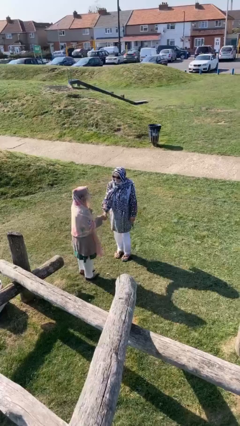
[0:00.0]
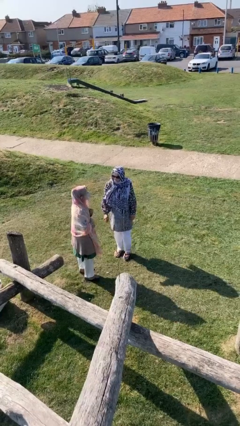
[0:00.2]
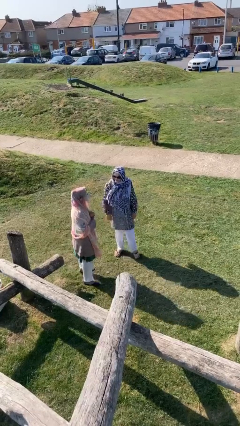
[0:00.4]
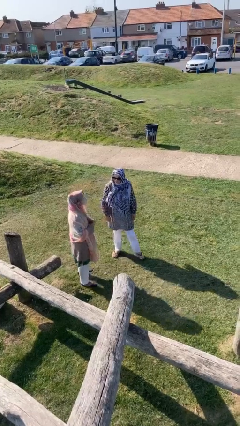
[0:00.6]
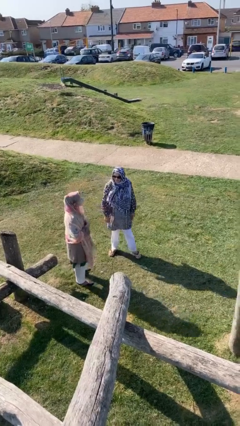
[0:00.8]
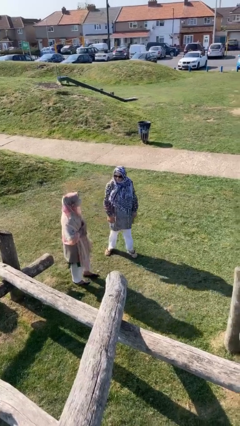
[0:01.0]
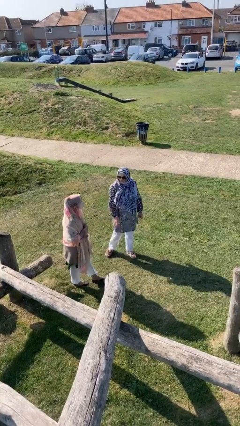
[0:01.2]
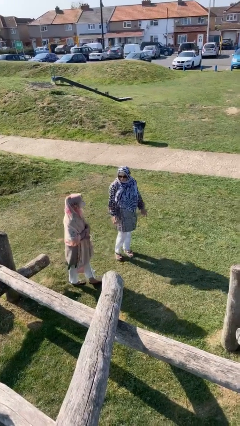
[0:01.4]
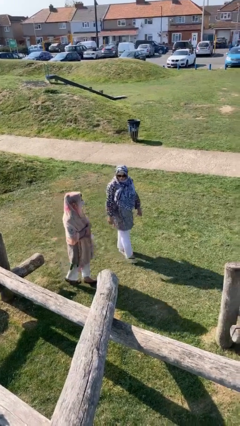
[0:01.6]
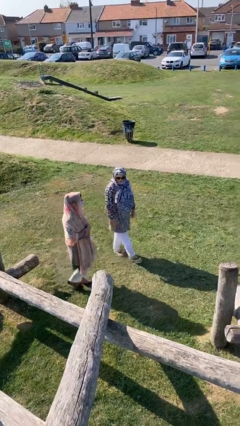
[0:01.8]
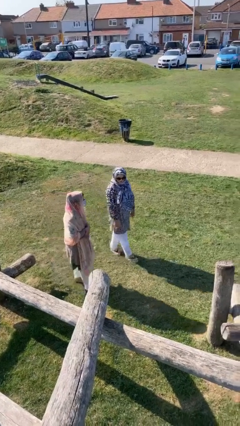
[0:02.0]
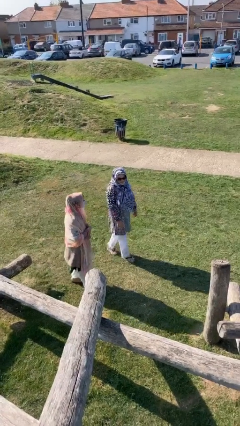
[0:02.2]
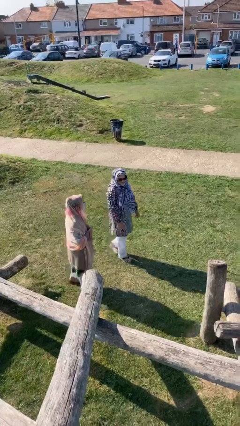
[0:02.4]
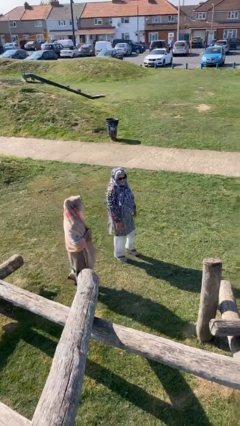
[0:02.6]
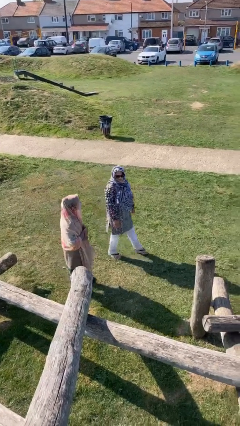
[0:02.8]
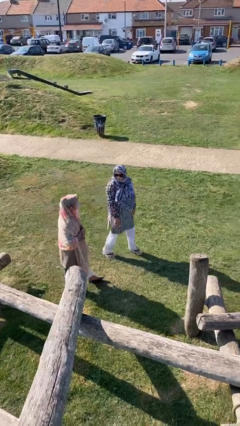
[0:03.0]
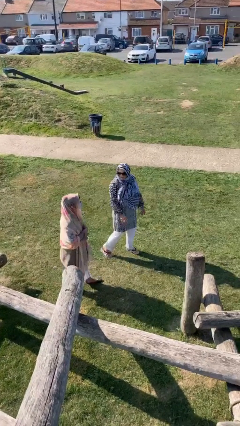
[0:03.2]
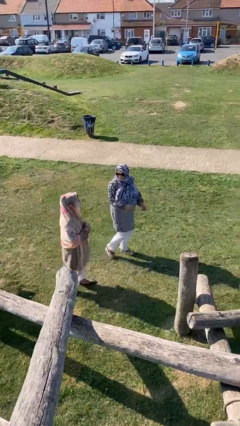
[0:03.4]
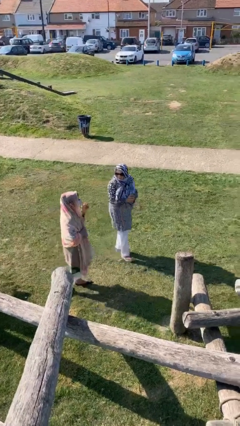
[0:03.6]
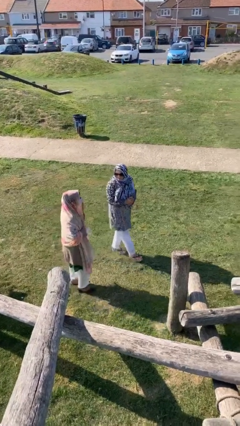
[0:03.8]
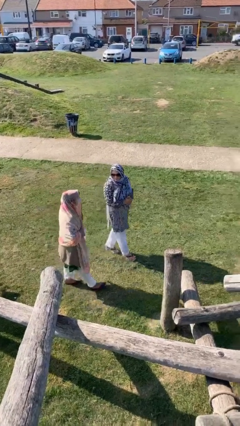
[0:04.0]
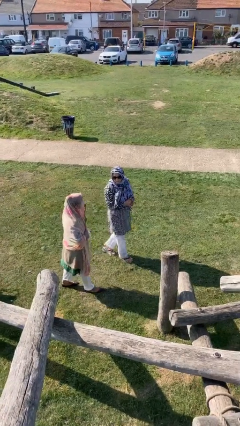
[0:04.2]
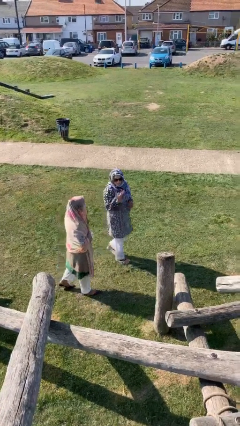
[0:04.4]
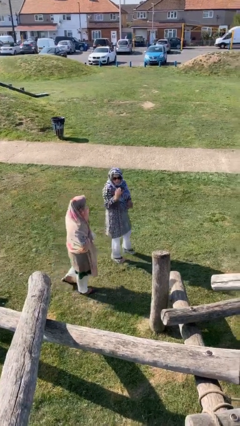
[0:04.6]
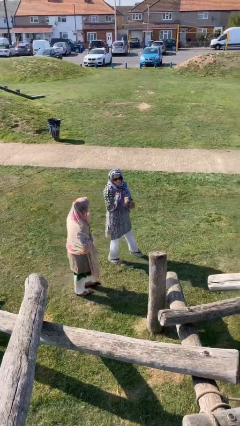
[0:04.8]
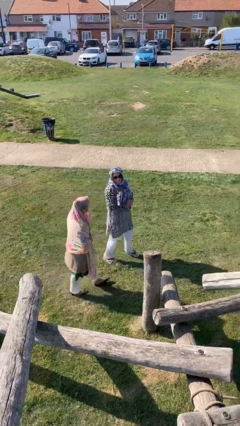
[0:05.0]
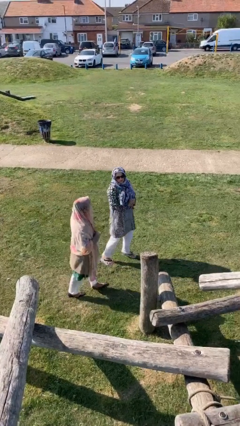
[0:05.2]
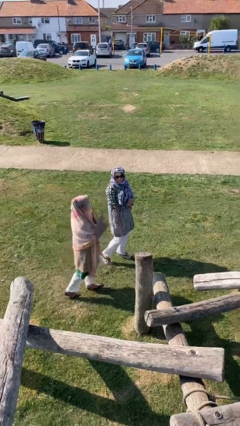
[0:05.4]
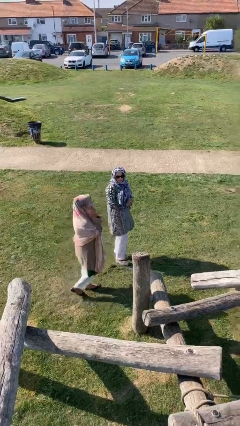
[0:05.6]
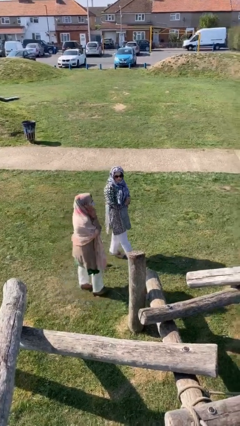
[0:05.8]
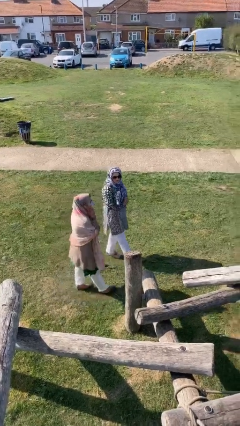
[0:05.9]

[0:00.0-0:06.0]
person talks to person

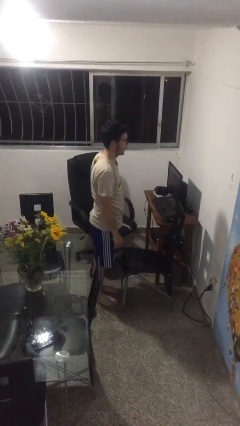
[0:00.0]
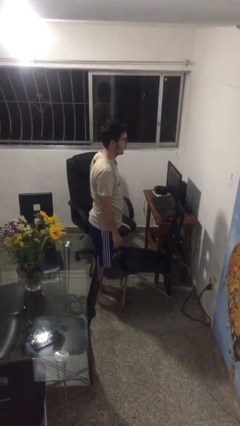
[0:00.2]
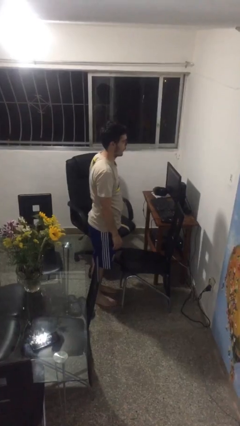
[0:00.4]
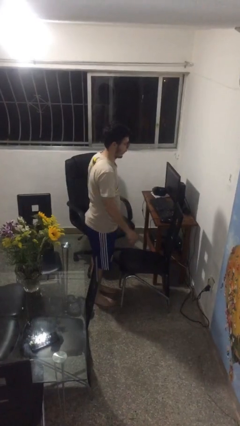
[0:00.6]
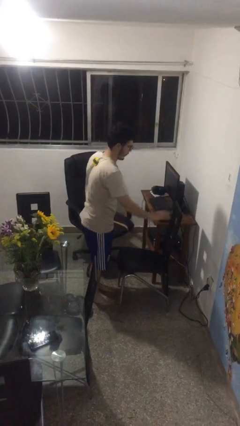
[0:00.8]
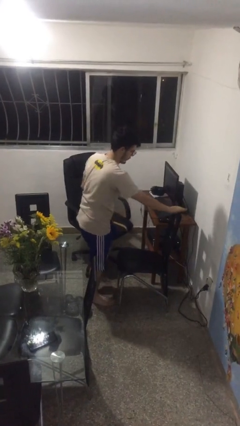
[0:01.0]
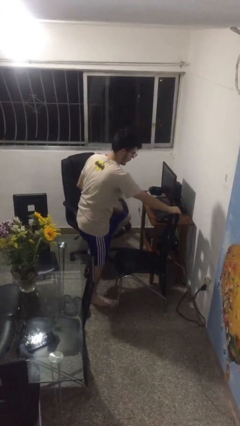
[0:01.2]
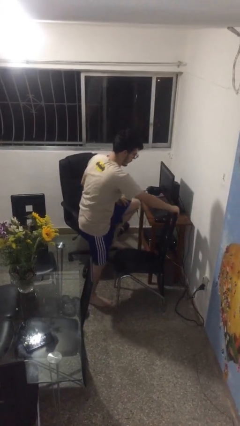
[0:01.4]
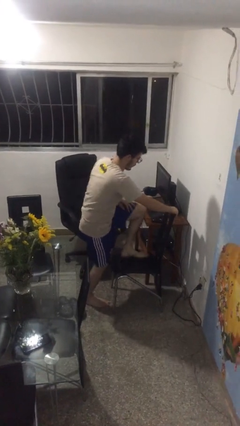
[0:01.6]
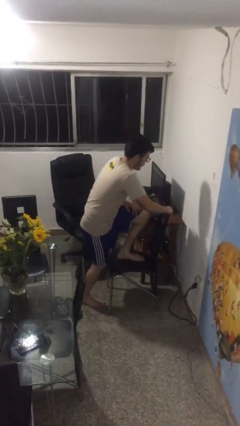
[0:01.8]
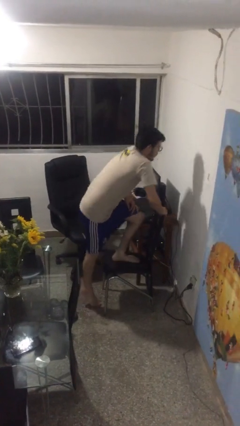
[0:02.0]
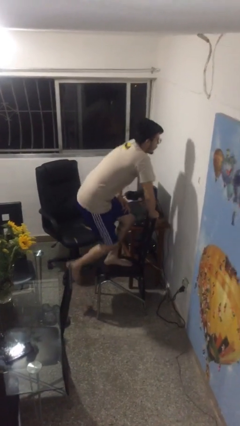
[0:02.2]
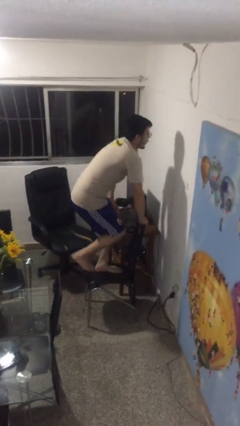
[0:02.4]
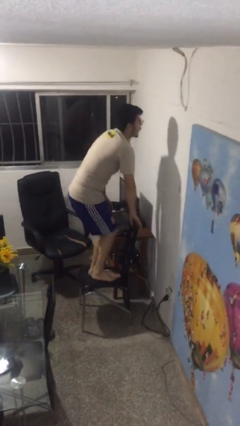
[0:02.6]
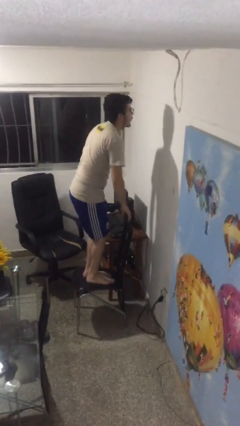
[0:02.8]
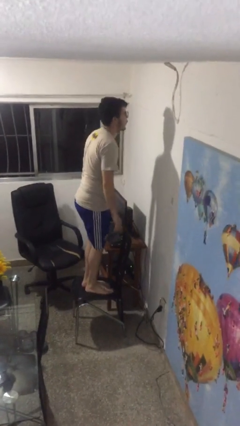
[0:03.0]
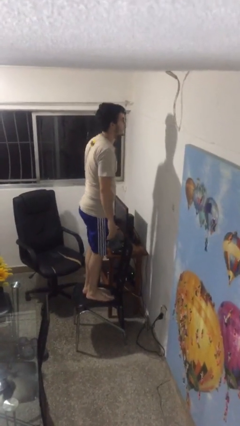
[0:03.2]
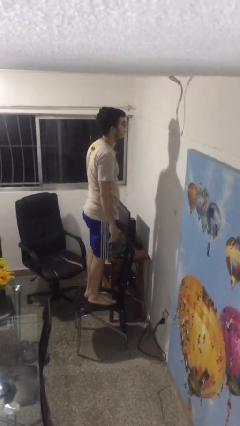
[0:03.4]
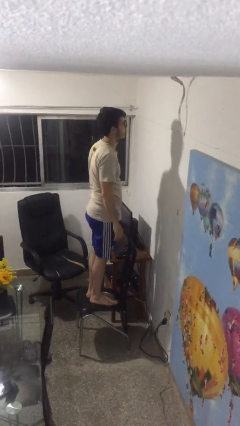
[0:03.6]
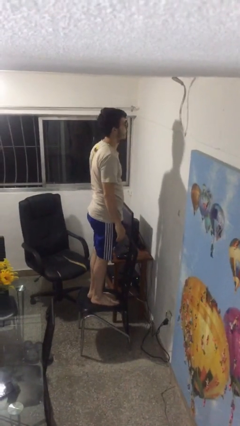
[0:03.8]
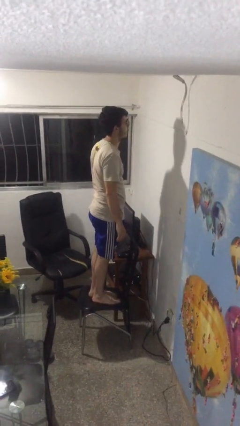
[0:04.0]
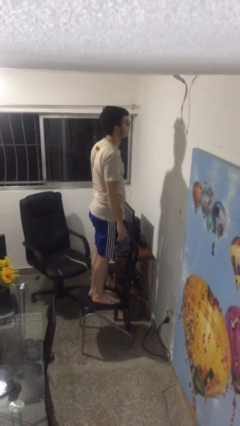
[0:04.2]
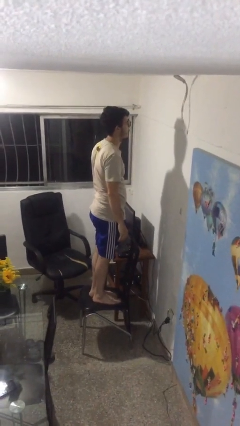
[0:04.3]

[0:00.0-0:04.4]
person climbs on chair

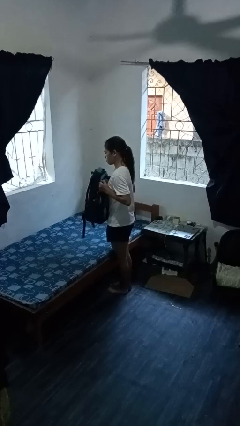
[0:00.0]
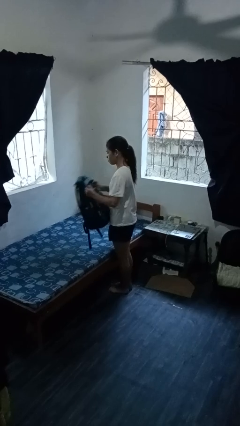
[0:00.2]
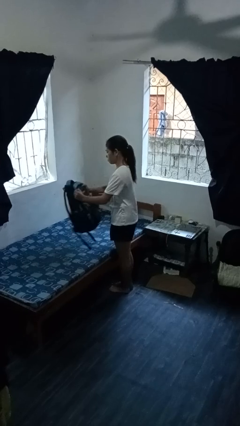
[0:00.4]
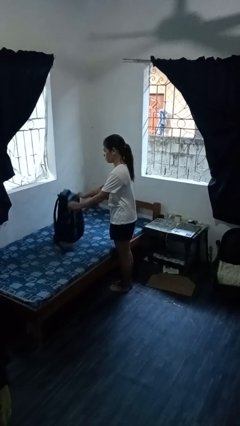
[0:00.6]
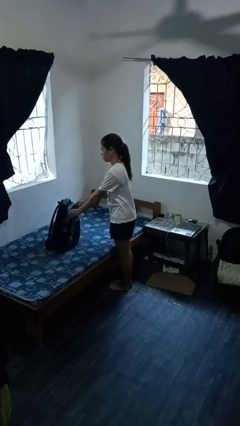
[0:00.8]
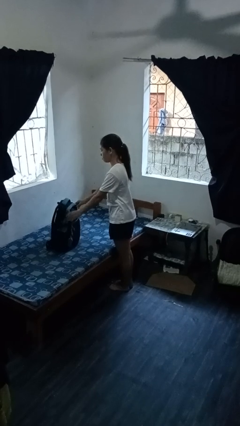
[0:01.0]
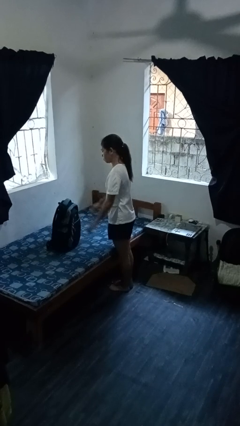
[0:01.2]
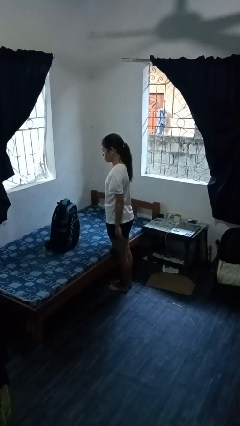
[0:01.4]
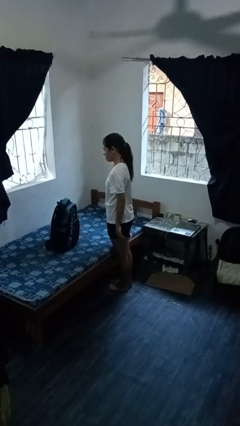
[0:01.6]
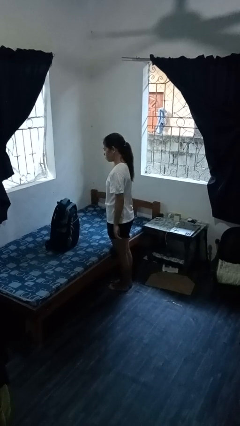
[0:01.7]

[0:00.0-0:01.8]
person puts down object on bed

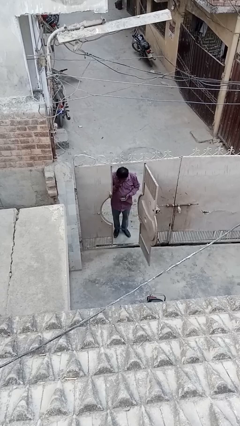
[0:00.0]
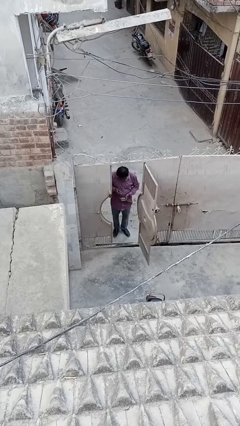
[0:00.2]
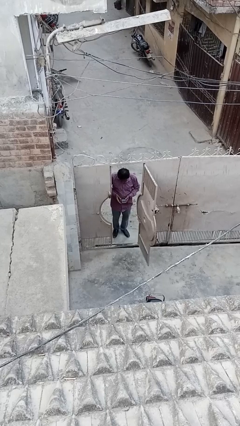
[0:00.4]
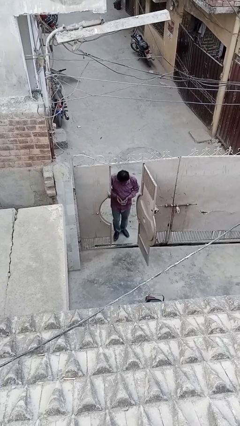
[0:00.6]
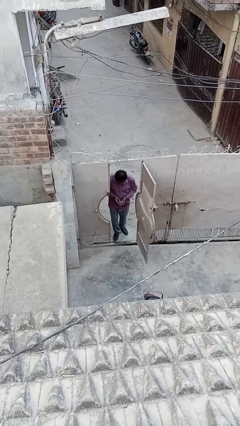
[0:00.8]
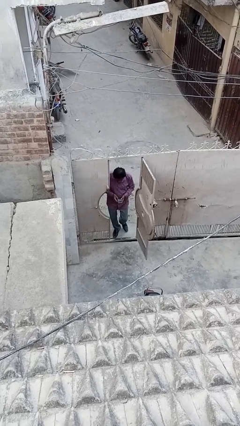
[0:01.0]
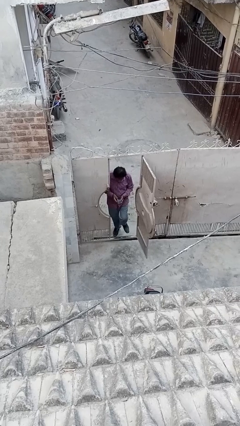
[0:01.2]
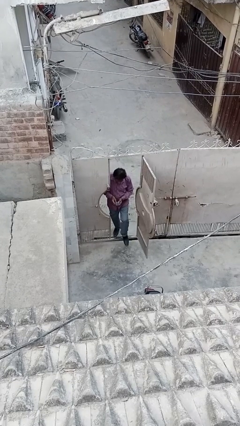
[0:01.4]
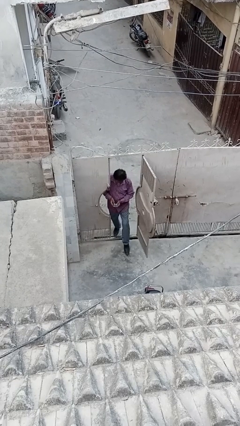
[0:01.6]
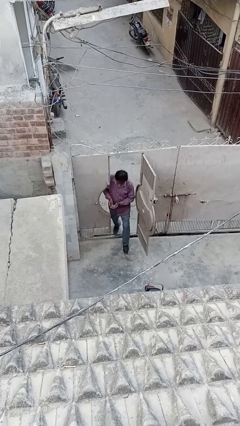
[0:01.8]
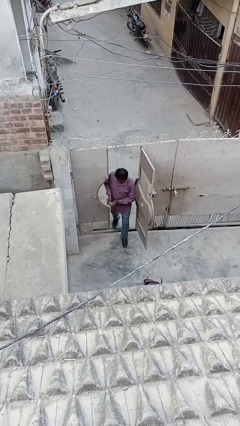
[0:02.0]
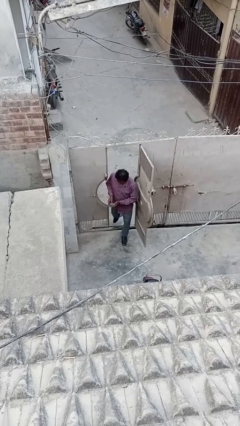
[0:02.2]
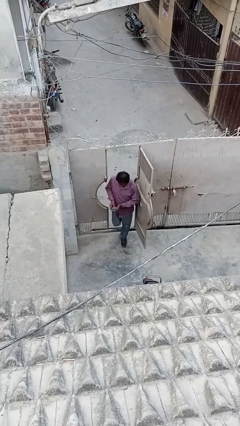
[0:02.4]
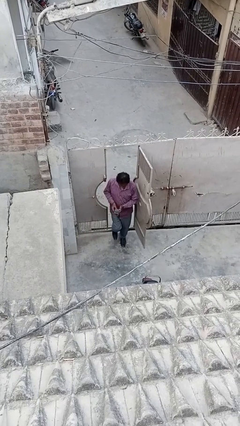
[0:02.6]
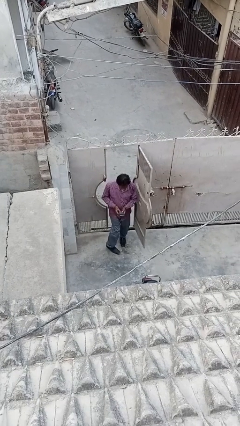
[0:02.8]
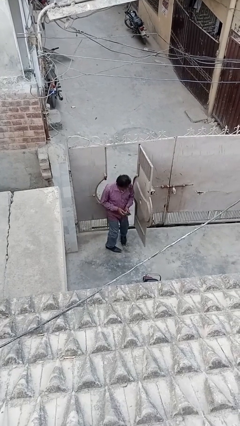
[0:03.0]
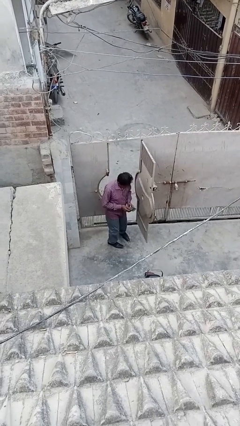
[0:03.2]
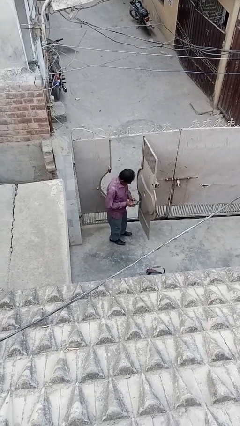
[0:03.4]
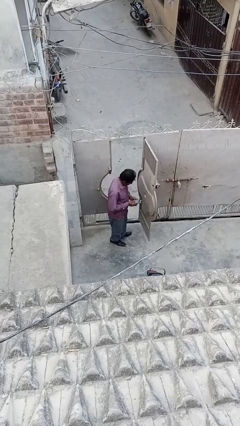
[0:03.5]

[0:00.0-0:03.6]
person enters scene through structure

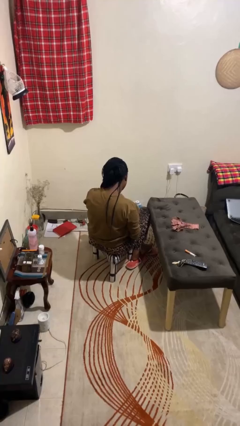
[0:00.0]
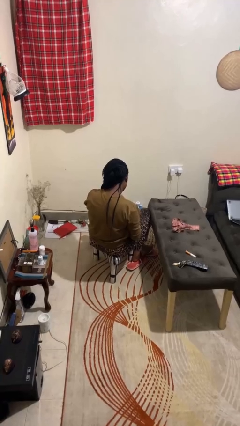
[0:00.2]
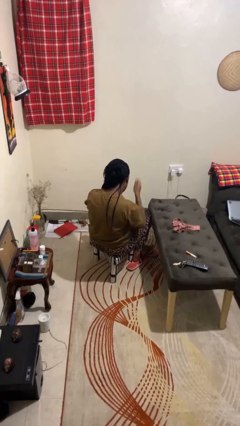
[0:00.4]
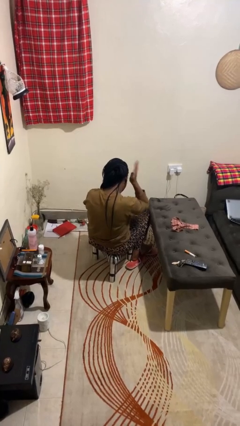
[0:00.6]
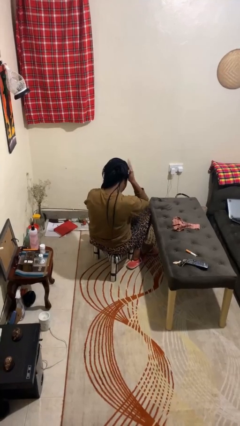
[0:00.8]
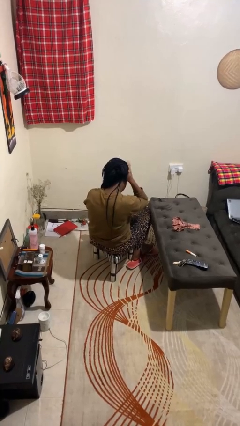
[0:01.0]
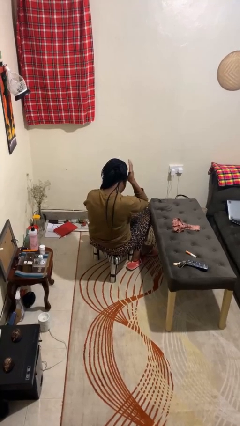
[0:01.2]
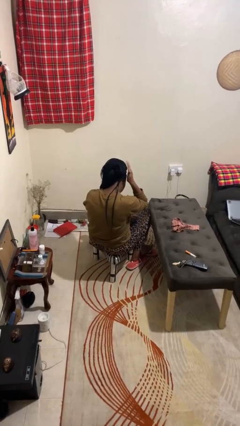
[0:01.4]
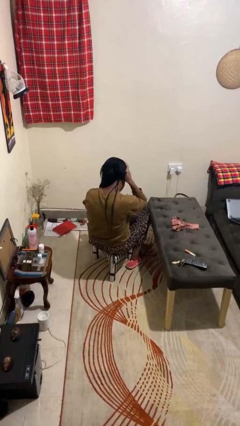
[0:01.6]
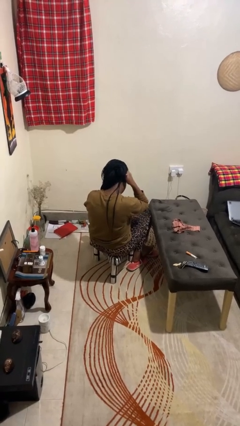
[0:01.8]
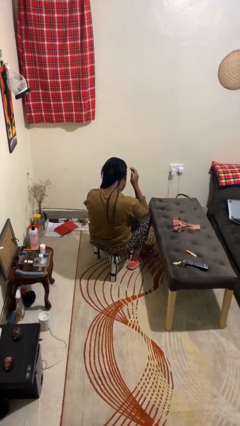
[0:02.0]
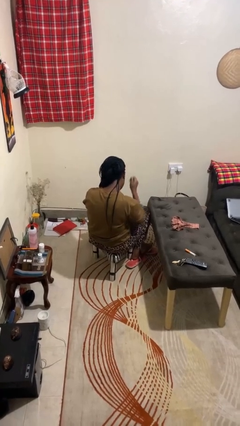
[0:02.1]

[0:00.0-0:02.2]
person pats head
